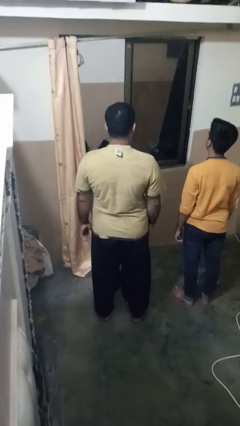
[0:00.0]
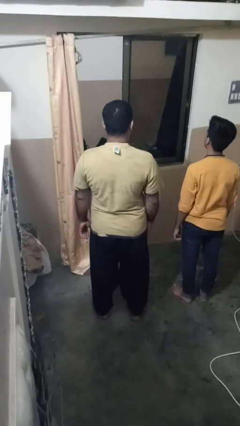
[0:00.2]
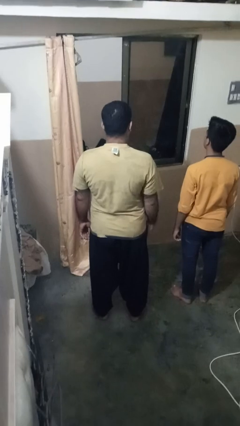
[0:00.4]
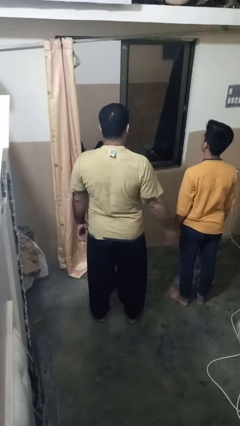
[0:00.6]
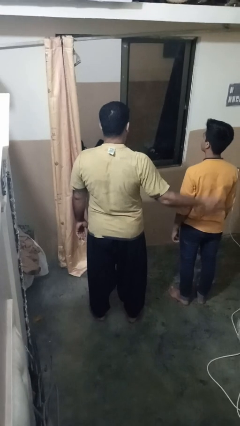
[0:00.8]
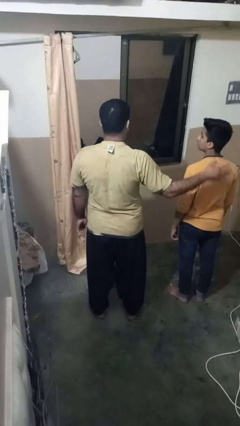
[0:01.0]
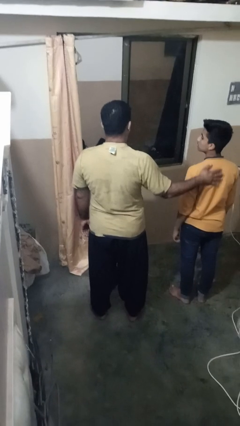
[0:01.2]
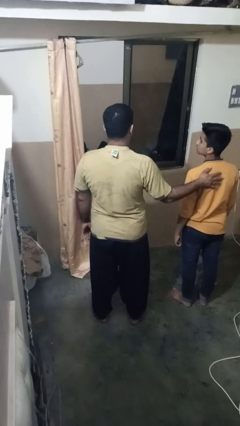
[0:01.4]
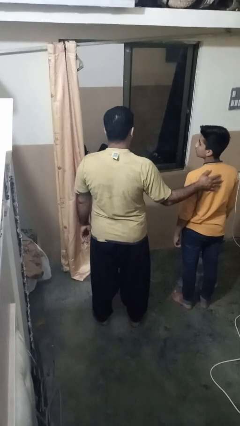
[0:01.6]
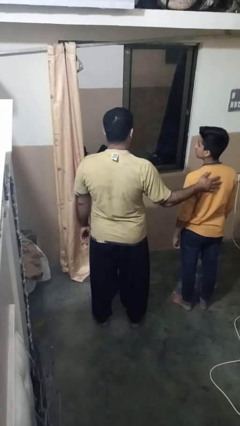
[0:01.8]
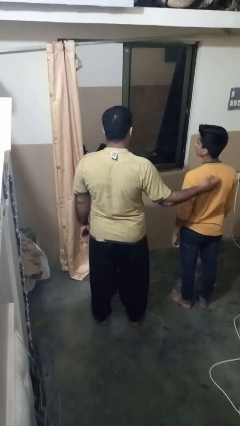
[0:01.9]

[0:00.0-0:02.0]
person touches back of person

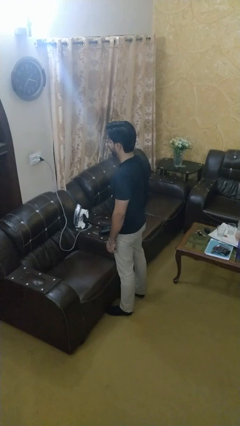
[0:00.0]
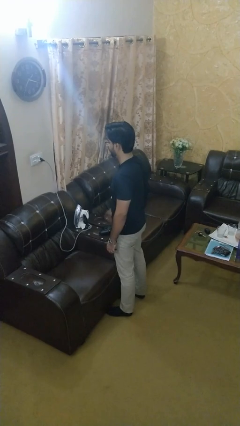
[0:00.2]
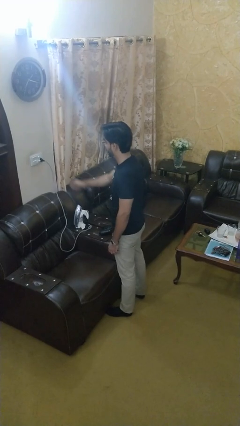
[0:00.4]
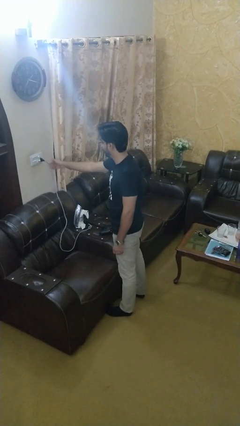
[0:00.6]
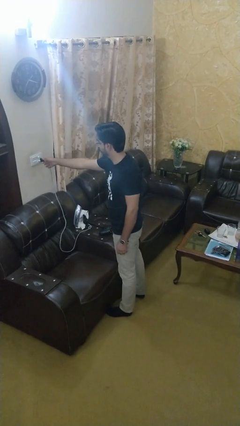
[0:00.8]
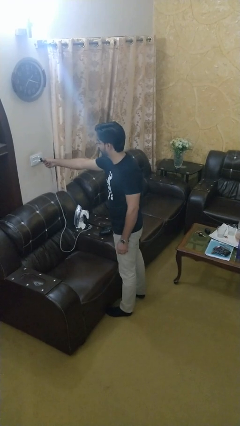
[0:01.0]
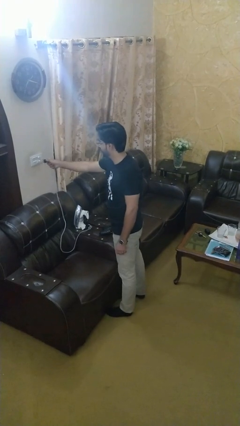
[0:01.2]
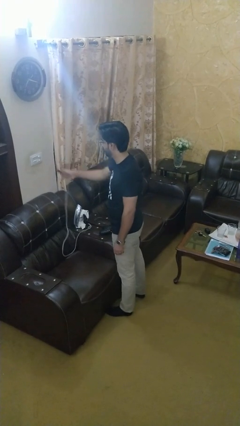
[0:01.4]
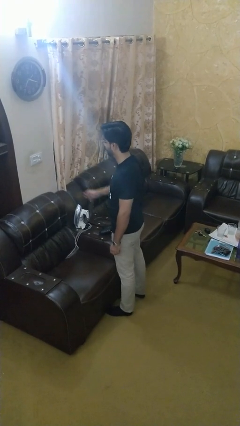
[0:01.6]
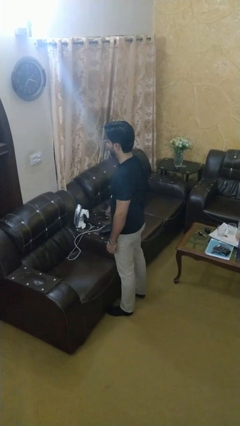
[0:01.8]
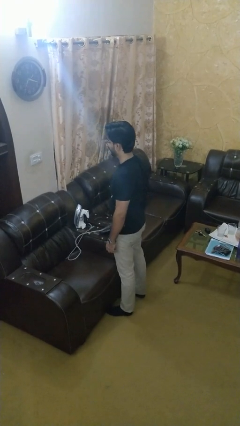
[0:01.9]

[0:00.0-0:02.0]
person unplugs from electrical socket

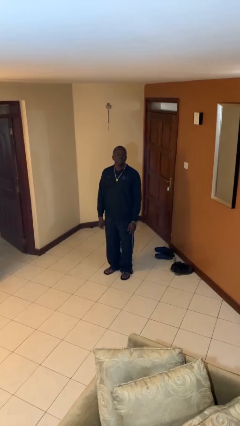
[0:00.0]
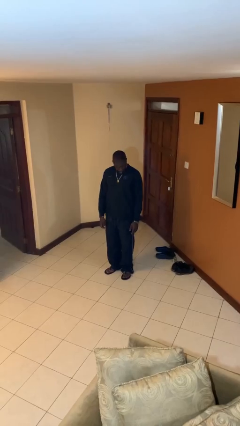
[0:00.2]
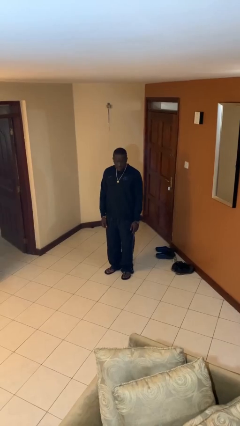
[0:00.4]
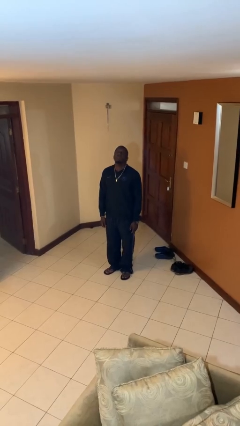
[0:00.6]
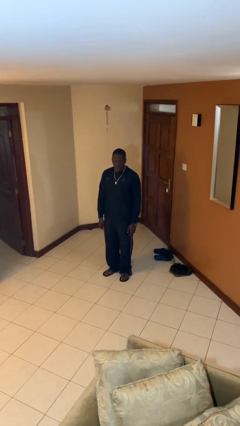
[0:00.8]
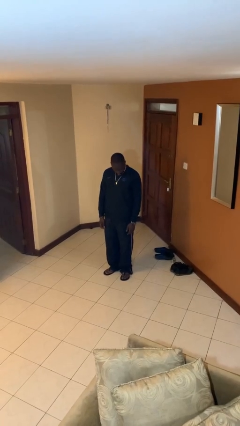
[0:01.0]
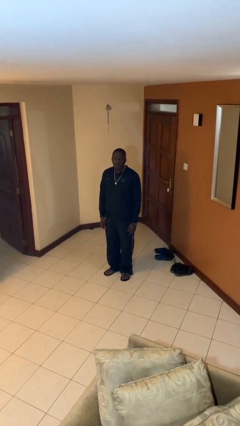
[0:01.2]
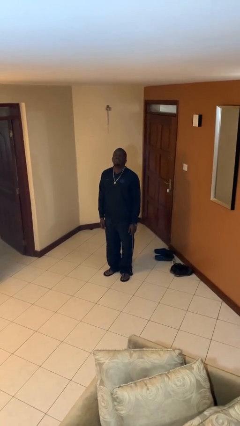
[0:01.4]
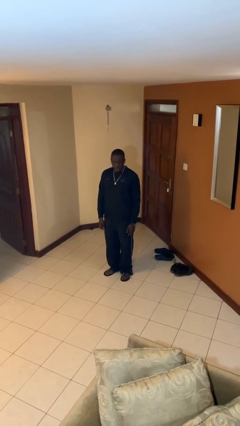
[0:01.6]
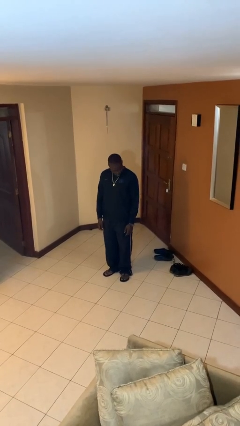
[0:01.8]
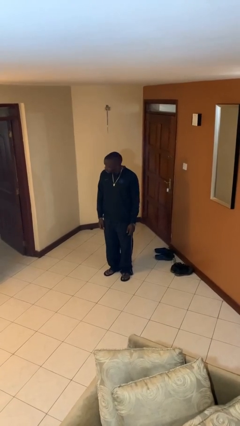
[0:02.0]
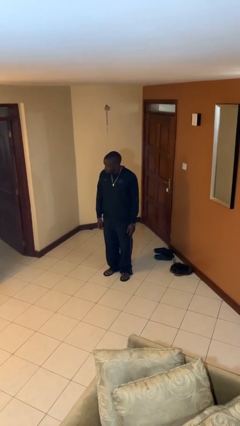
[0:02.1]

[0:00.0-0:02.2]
person nods head

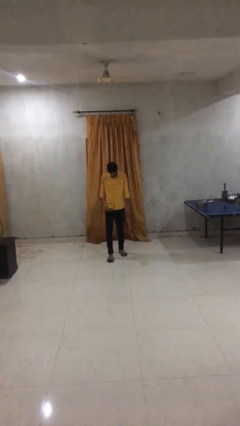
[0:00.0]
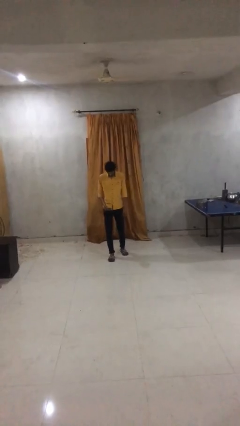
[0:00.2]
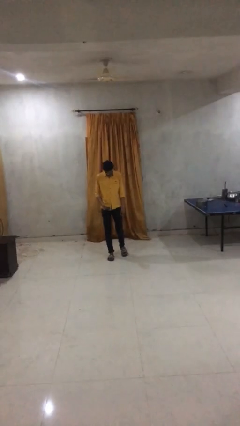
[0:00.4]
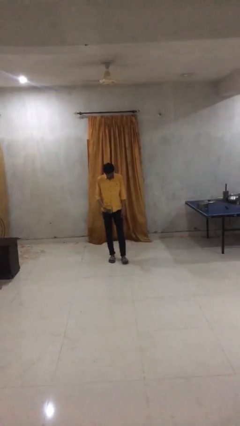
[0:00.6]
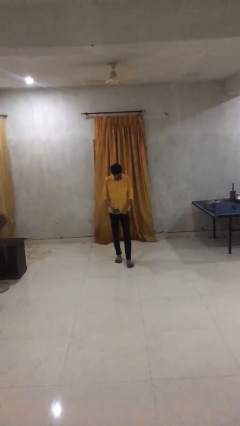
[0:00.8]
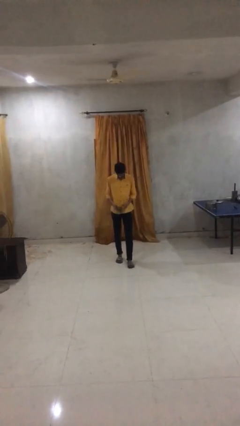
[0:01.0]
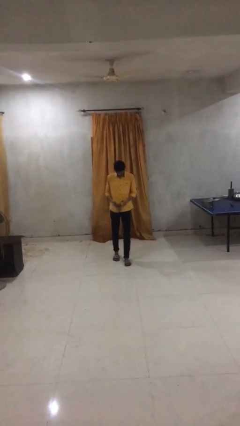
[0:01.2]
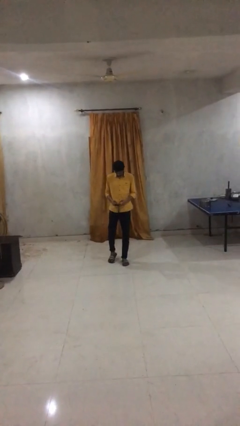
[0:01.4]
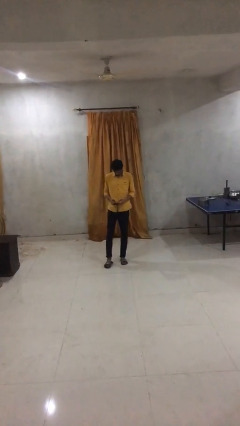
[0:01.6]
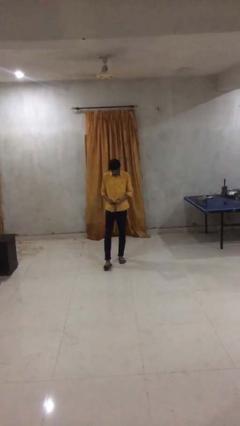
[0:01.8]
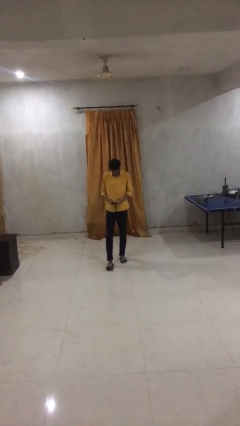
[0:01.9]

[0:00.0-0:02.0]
person texts on phone

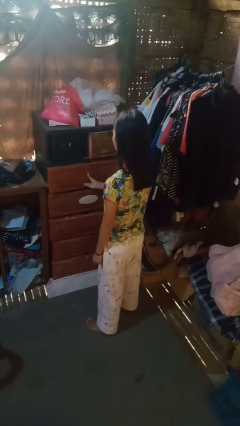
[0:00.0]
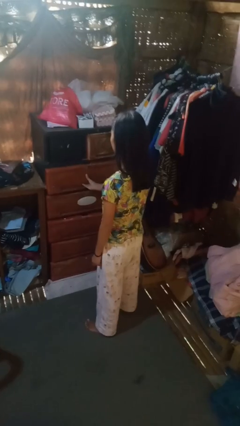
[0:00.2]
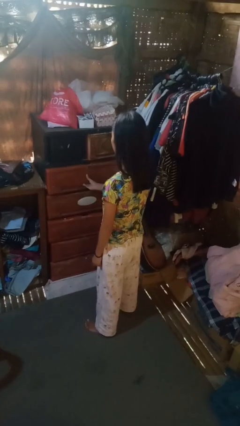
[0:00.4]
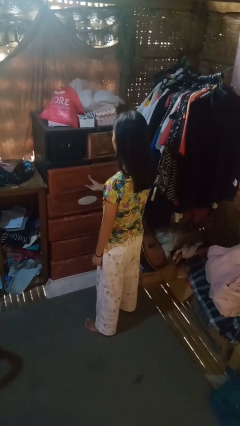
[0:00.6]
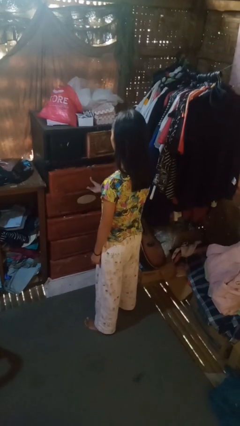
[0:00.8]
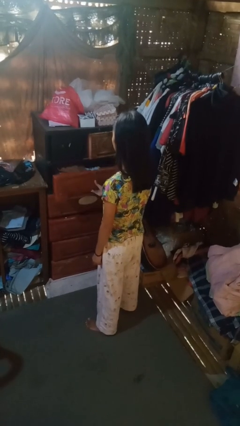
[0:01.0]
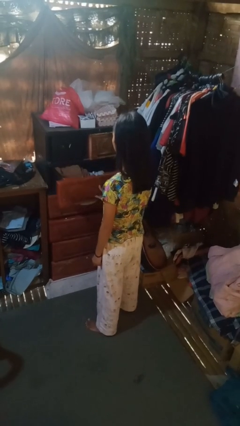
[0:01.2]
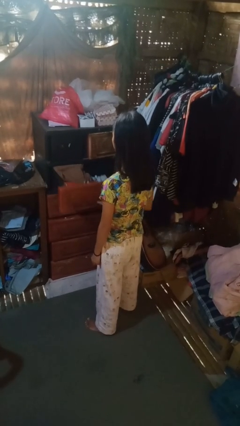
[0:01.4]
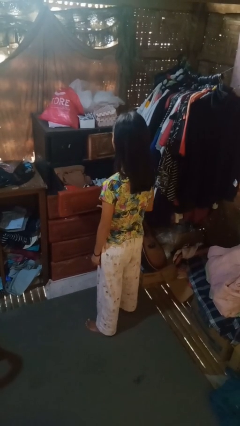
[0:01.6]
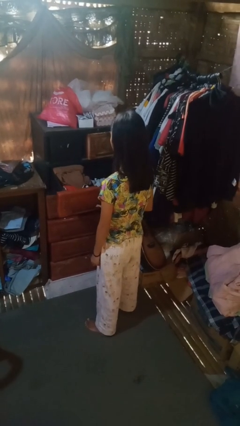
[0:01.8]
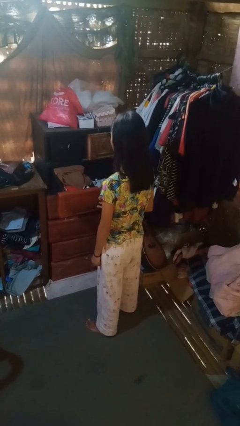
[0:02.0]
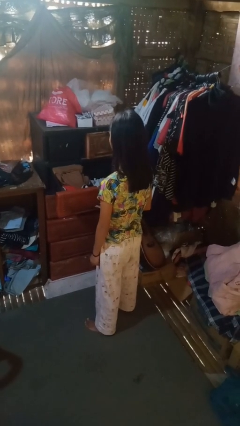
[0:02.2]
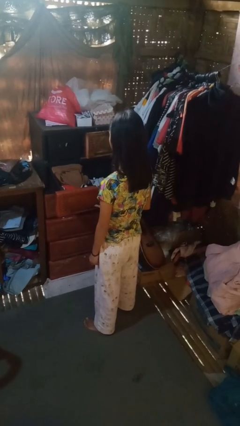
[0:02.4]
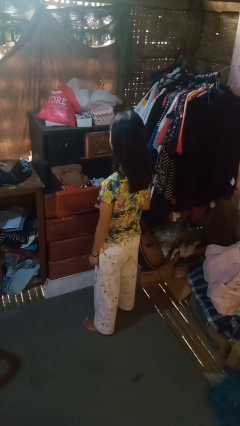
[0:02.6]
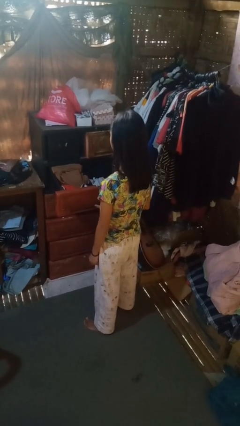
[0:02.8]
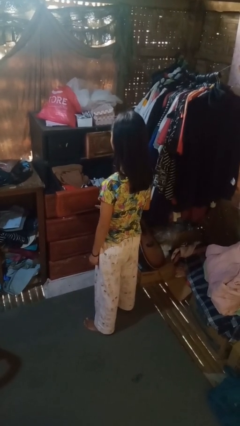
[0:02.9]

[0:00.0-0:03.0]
person opens dresser drawer

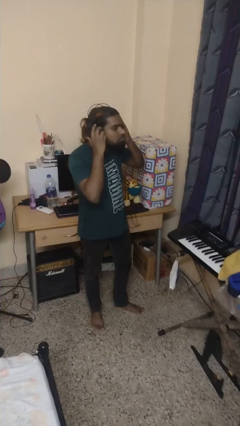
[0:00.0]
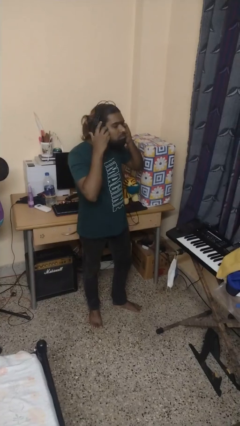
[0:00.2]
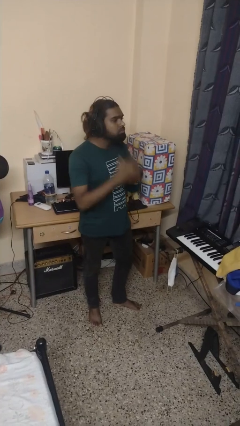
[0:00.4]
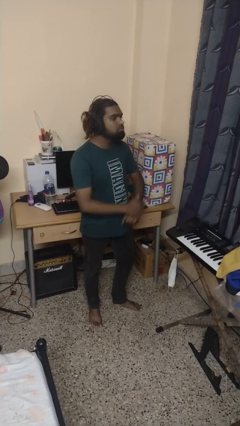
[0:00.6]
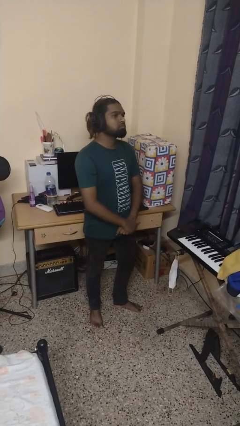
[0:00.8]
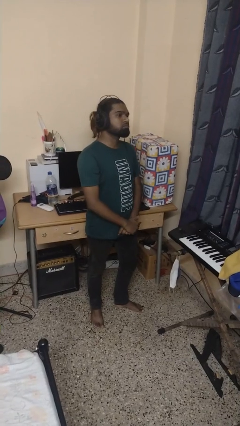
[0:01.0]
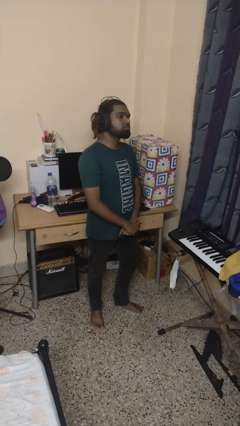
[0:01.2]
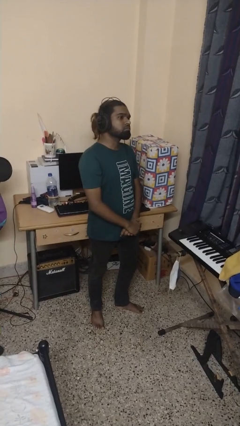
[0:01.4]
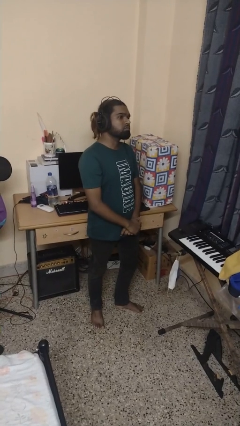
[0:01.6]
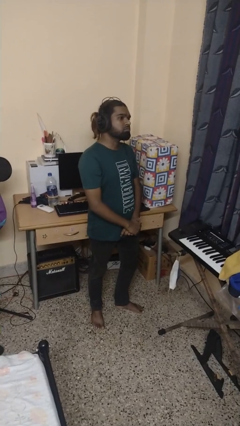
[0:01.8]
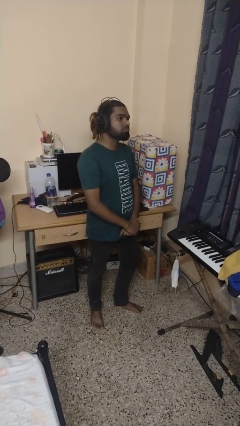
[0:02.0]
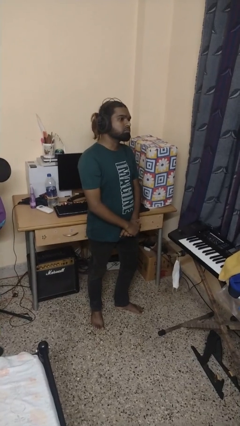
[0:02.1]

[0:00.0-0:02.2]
person puts on headphones

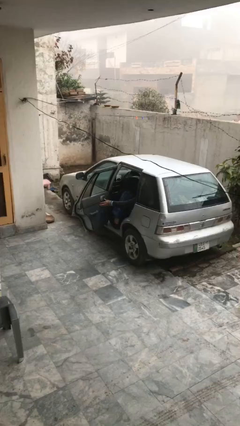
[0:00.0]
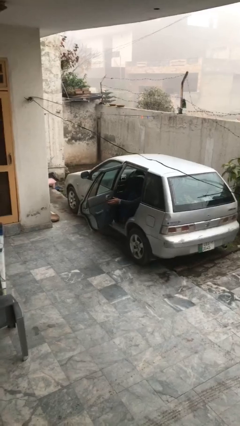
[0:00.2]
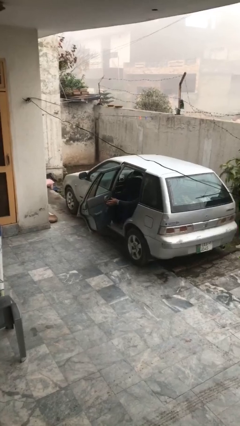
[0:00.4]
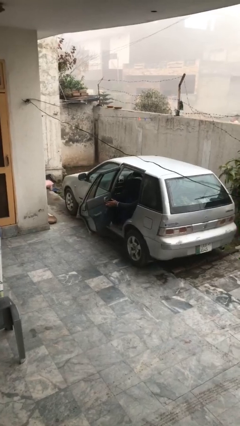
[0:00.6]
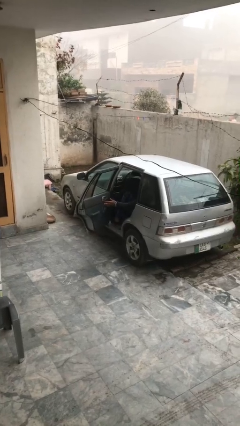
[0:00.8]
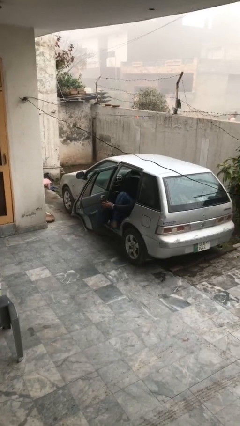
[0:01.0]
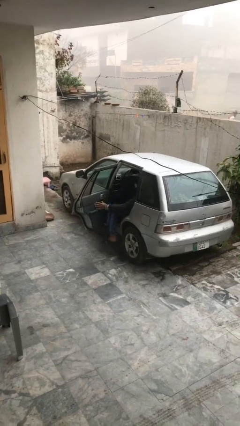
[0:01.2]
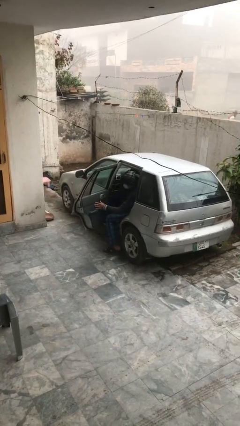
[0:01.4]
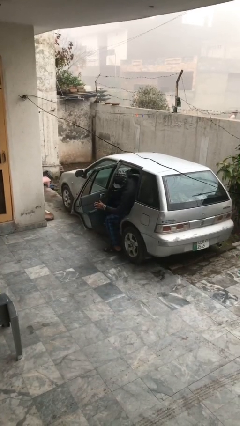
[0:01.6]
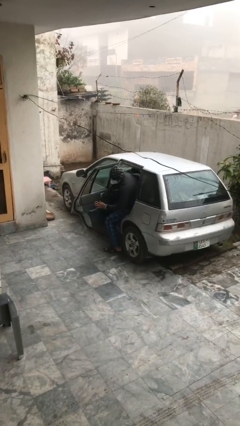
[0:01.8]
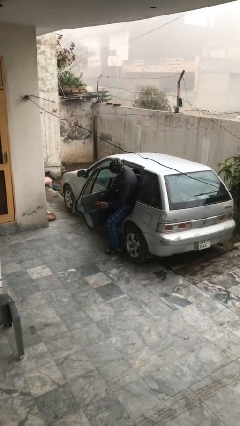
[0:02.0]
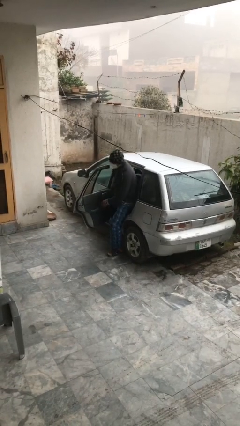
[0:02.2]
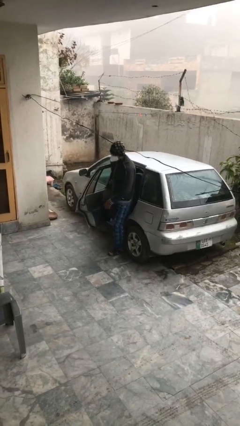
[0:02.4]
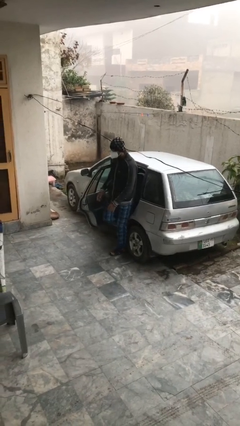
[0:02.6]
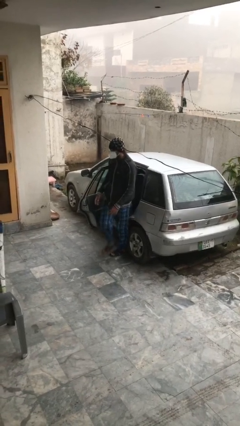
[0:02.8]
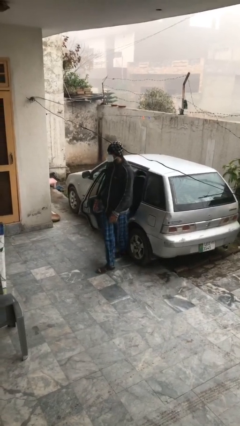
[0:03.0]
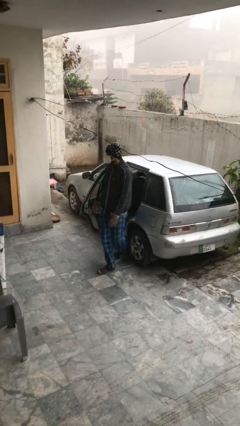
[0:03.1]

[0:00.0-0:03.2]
person exits car

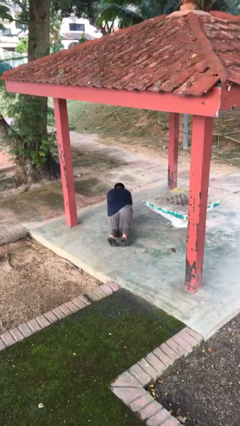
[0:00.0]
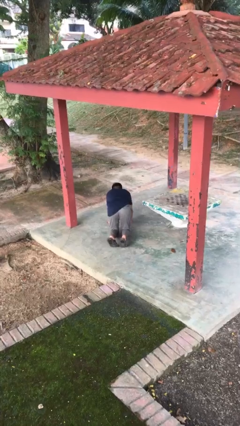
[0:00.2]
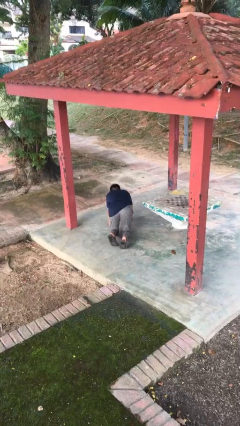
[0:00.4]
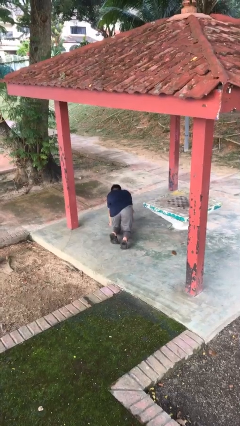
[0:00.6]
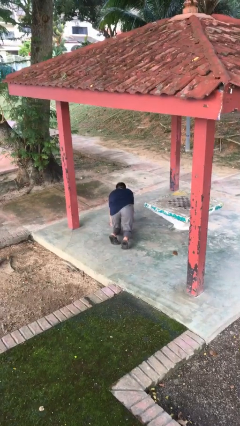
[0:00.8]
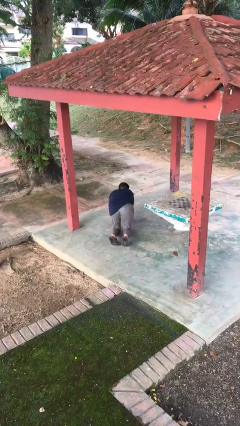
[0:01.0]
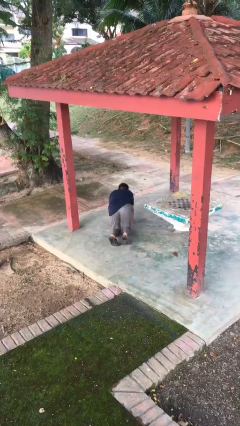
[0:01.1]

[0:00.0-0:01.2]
person crawls
